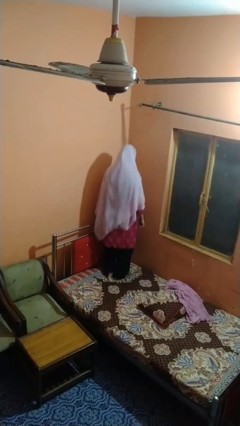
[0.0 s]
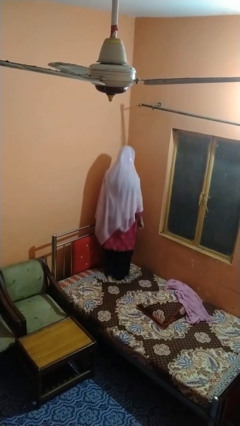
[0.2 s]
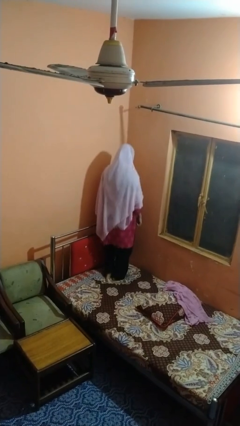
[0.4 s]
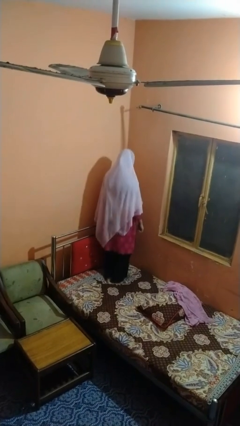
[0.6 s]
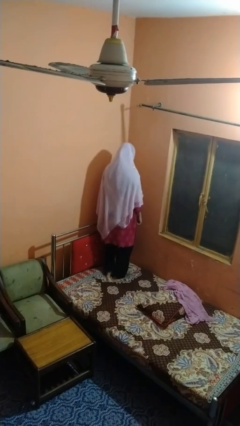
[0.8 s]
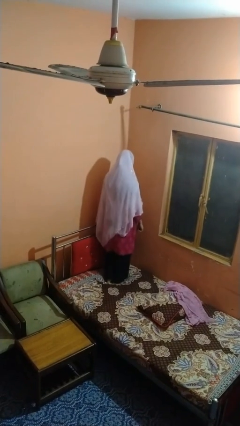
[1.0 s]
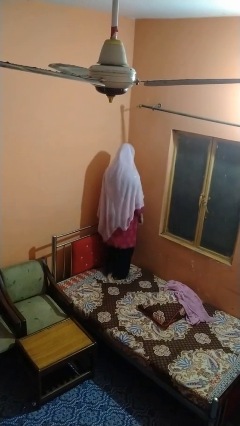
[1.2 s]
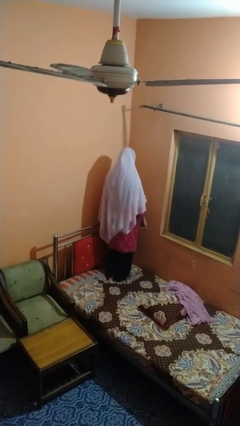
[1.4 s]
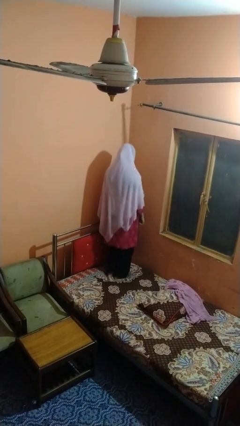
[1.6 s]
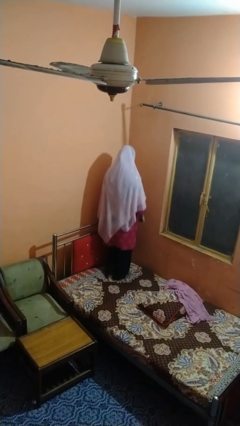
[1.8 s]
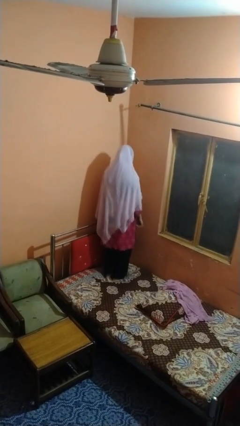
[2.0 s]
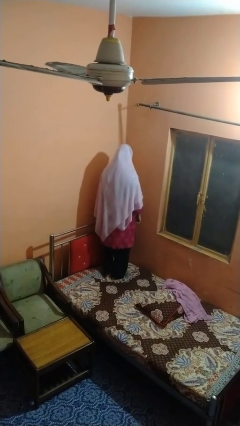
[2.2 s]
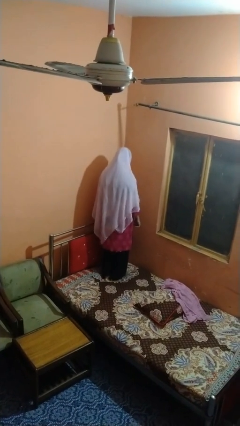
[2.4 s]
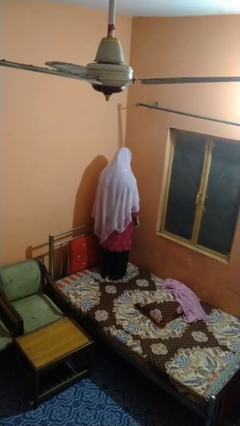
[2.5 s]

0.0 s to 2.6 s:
person jumps on bed

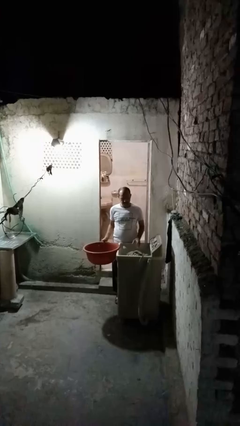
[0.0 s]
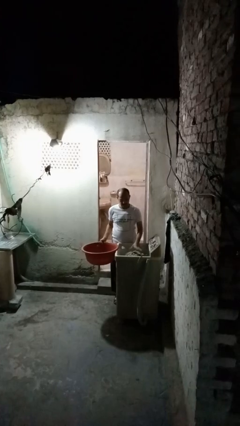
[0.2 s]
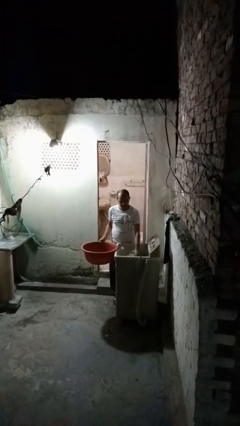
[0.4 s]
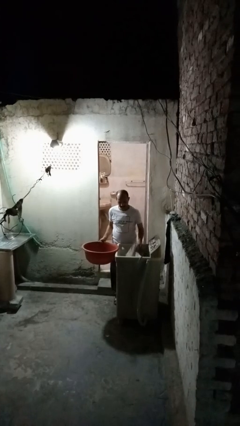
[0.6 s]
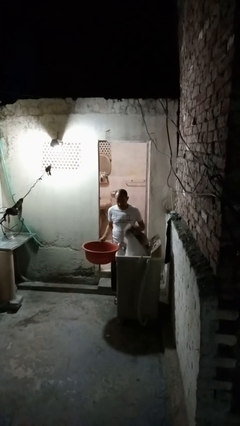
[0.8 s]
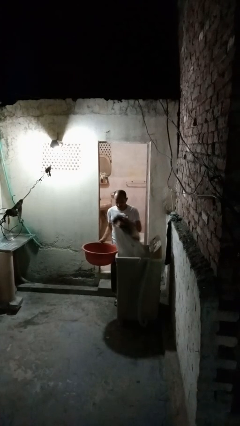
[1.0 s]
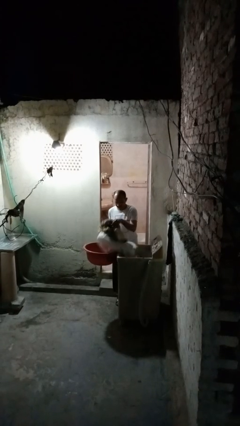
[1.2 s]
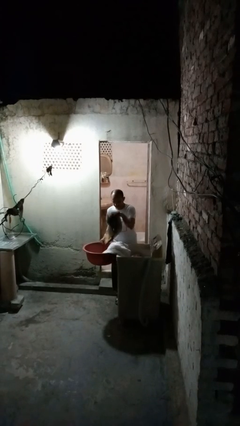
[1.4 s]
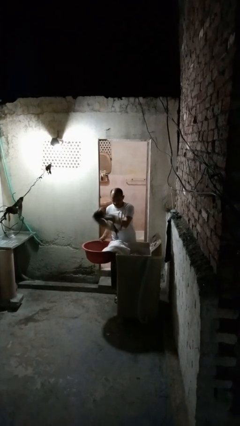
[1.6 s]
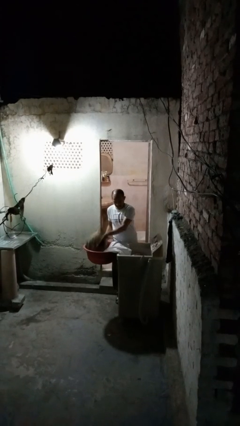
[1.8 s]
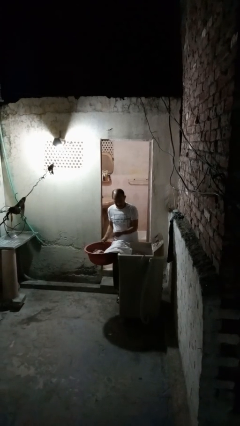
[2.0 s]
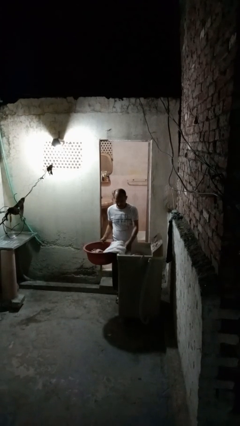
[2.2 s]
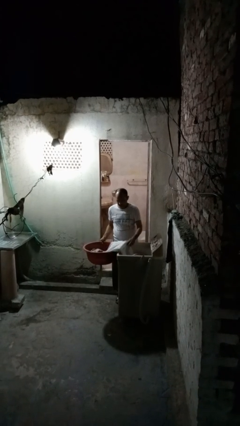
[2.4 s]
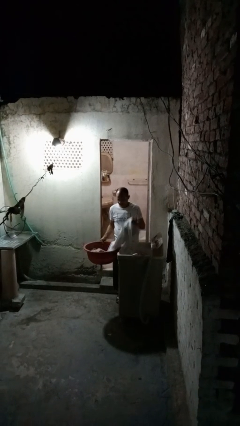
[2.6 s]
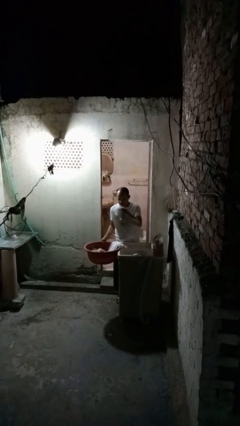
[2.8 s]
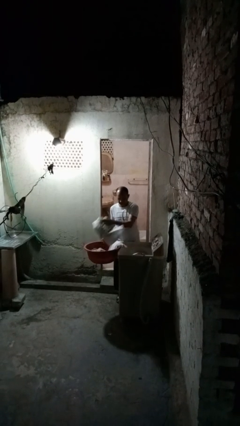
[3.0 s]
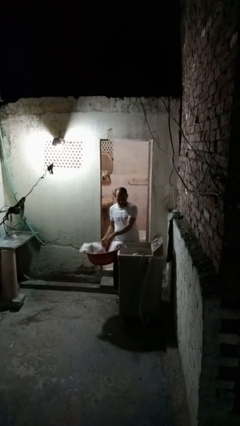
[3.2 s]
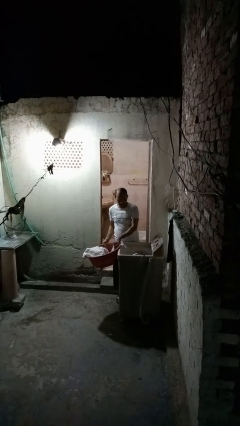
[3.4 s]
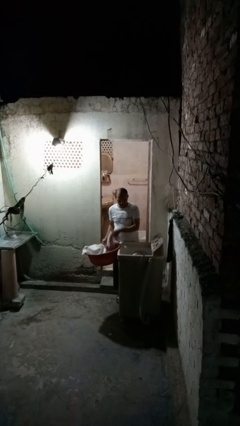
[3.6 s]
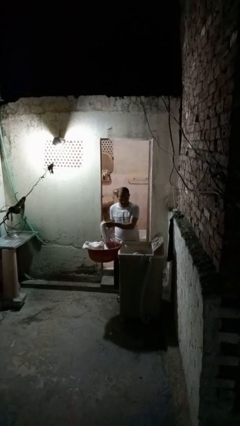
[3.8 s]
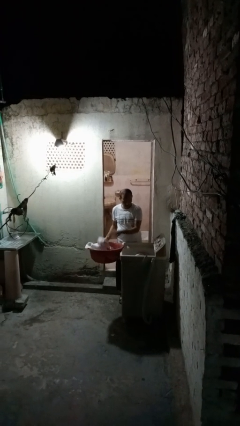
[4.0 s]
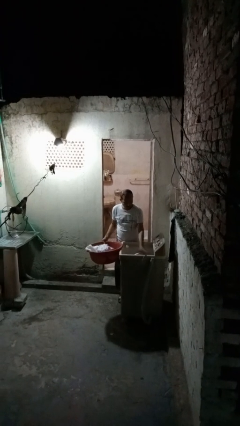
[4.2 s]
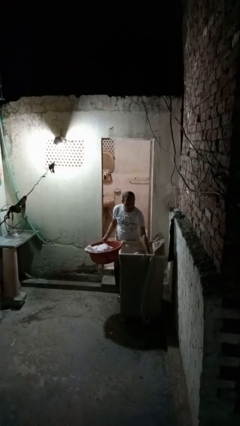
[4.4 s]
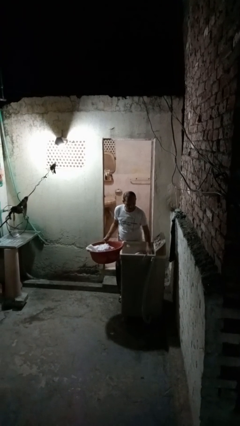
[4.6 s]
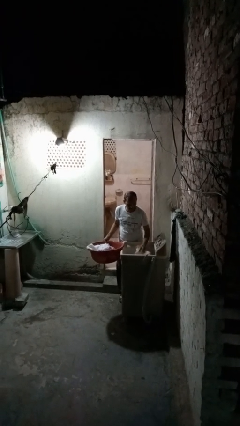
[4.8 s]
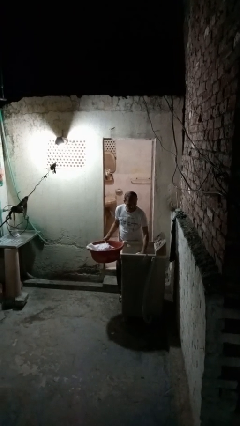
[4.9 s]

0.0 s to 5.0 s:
person unloads clotheswasher

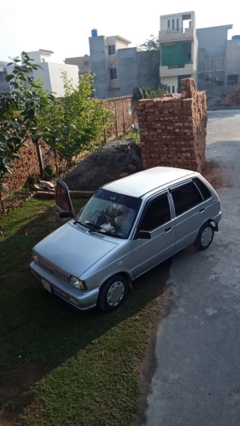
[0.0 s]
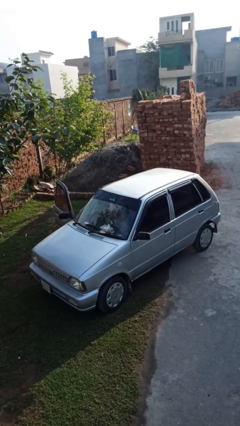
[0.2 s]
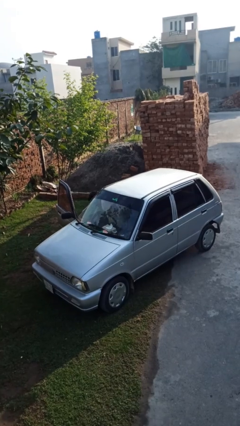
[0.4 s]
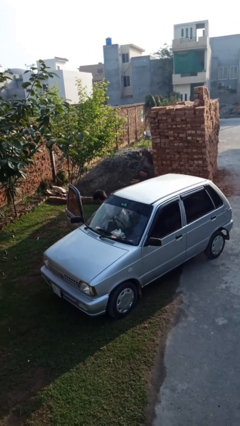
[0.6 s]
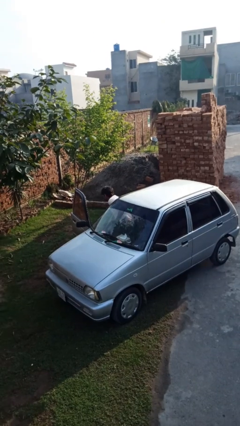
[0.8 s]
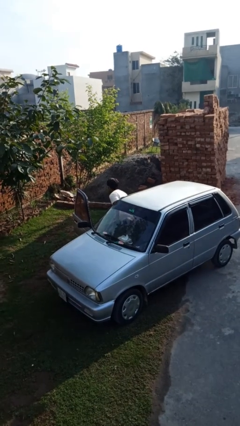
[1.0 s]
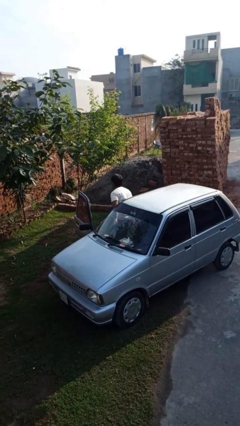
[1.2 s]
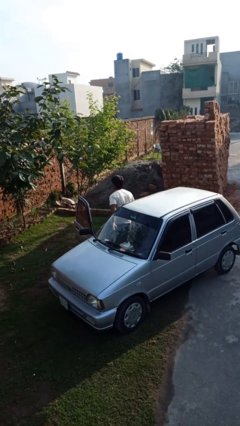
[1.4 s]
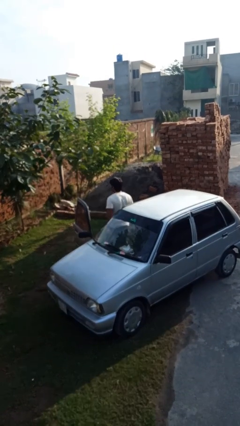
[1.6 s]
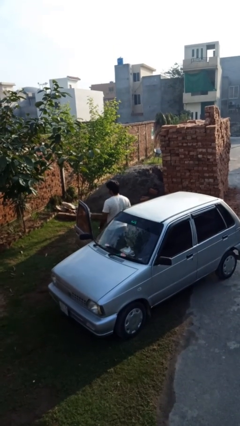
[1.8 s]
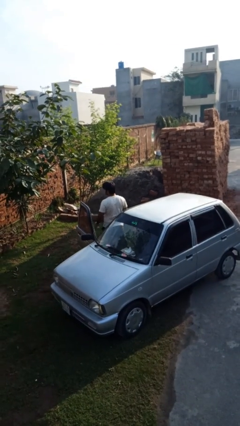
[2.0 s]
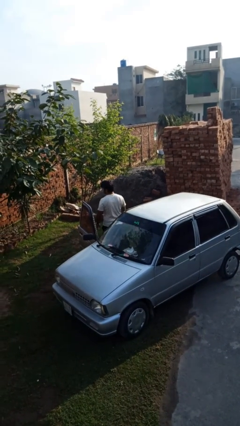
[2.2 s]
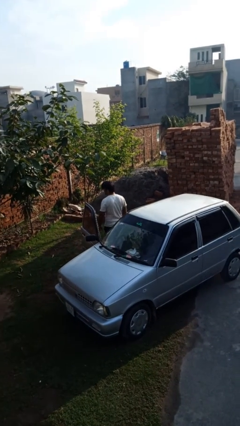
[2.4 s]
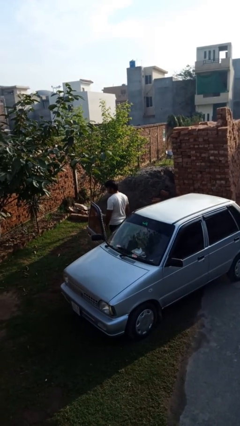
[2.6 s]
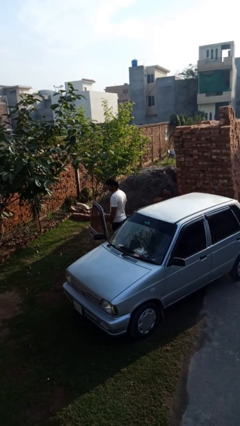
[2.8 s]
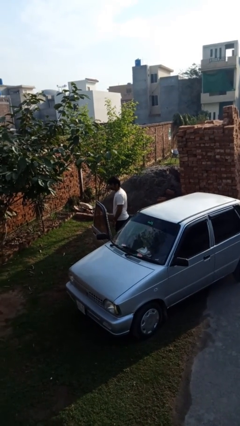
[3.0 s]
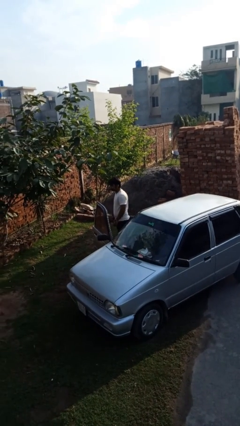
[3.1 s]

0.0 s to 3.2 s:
person exits car

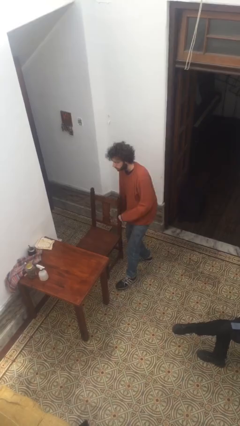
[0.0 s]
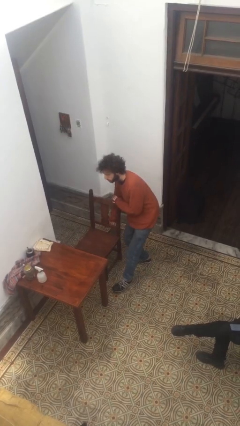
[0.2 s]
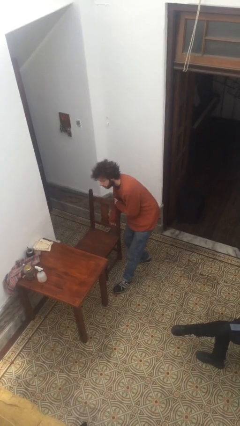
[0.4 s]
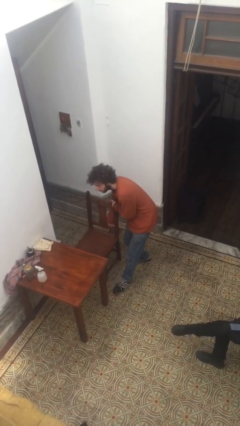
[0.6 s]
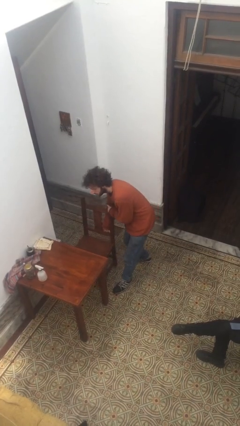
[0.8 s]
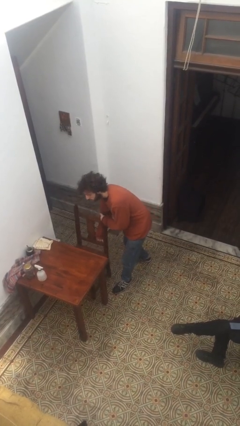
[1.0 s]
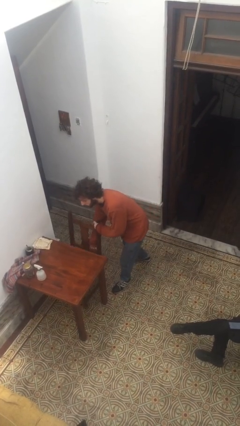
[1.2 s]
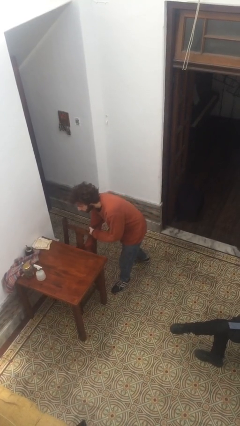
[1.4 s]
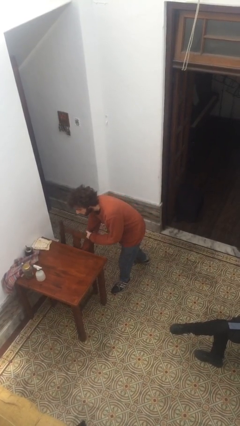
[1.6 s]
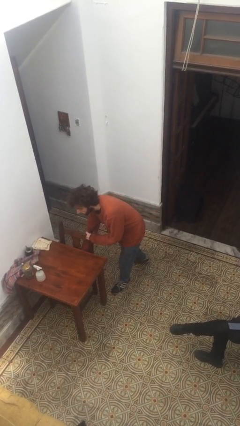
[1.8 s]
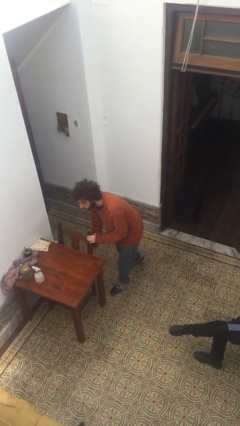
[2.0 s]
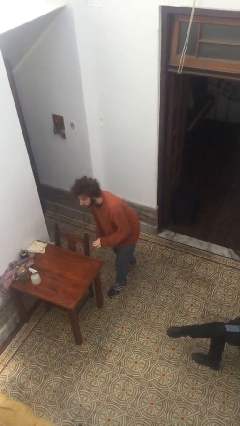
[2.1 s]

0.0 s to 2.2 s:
person pushes in chair

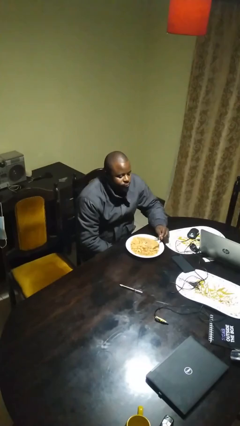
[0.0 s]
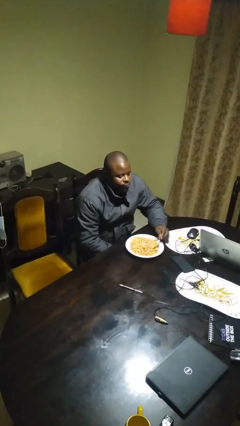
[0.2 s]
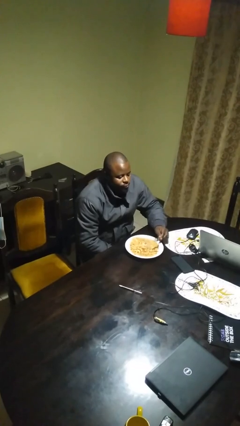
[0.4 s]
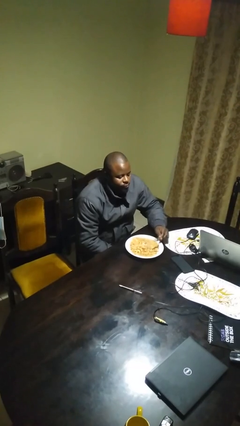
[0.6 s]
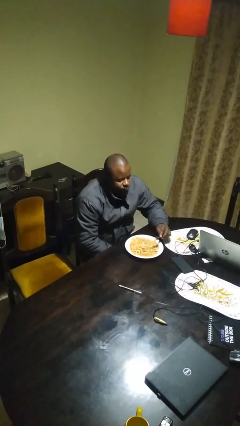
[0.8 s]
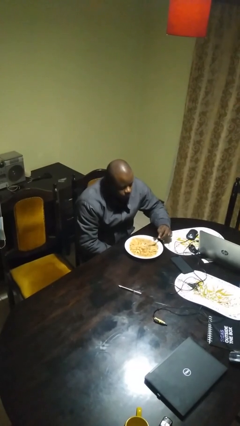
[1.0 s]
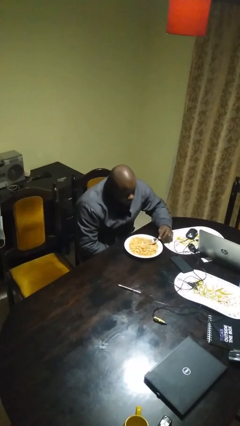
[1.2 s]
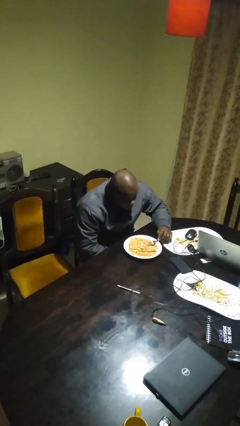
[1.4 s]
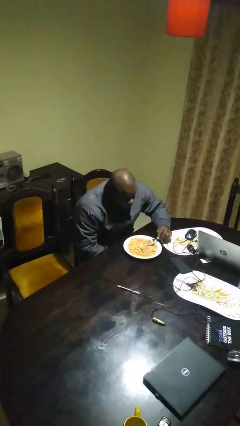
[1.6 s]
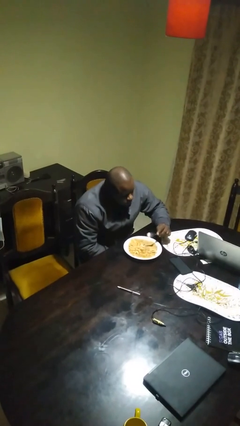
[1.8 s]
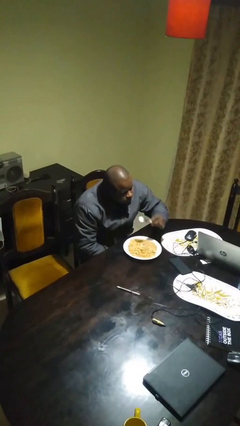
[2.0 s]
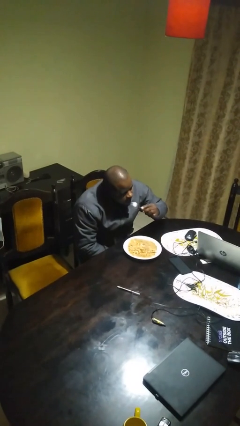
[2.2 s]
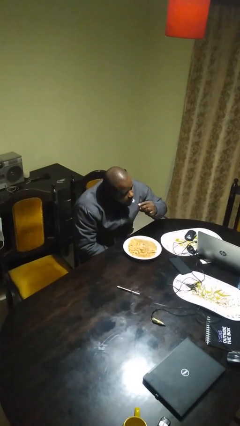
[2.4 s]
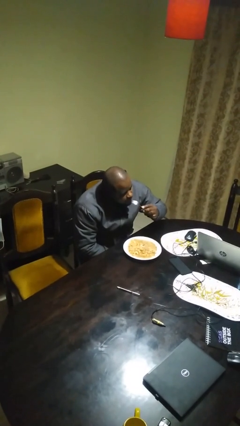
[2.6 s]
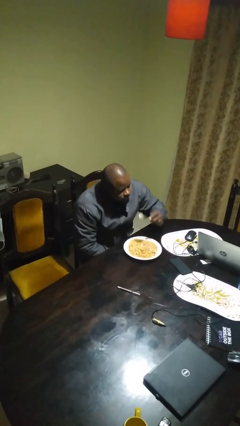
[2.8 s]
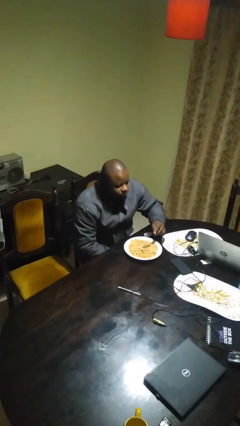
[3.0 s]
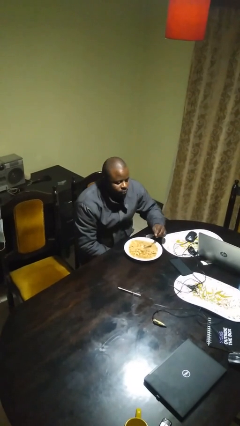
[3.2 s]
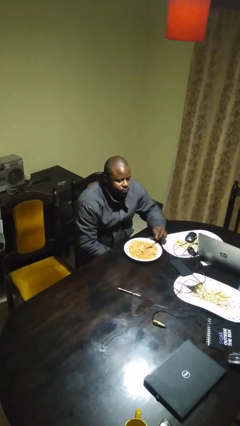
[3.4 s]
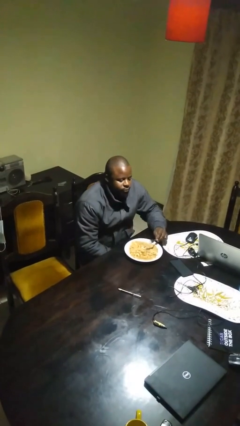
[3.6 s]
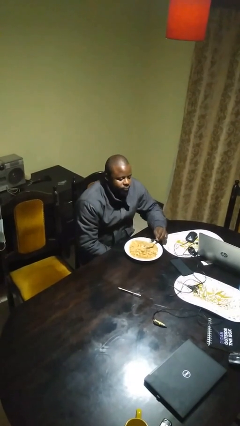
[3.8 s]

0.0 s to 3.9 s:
person eats with utensil

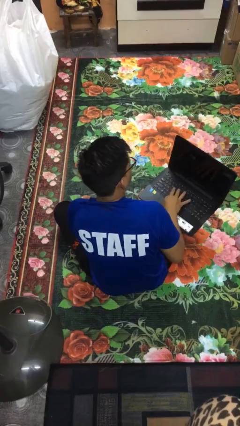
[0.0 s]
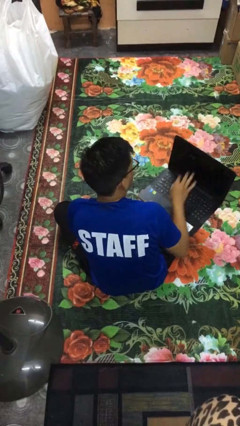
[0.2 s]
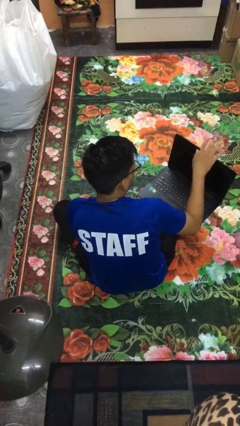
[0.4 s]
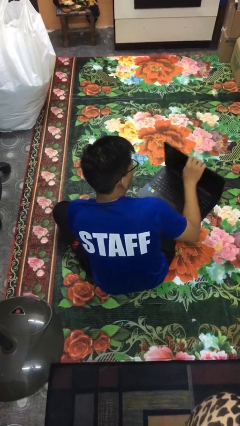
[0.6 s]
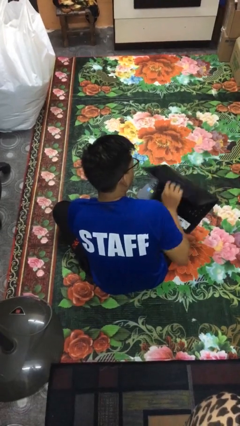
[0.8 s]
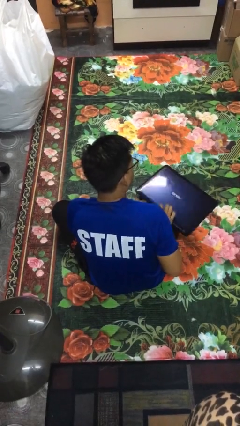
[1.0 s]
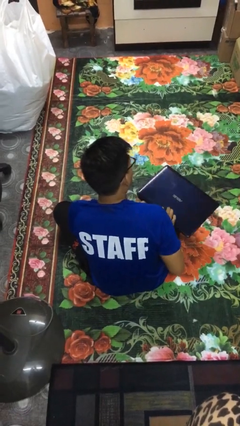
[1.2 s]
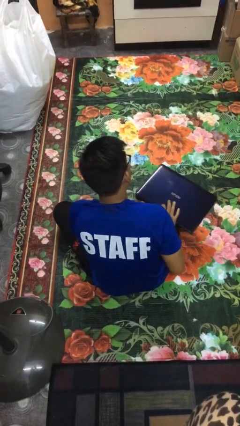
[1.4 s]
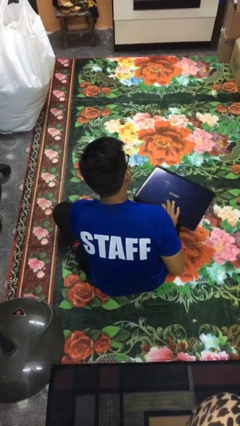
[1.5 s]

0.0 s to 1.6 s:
person closes laptop
